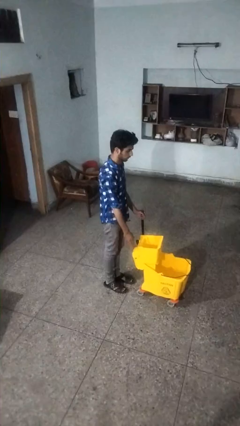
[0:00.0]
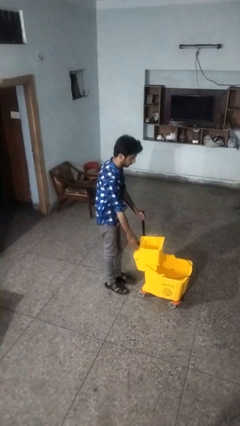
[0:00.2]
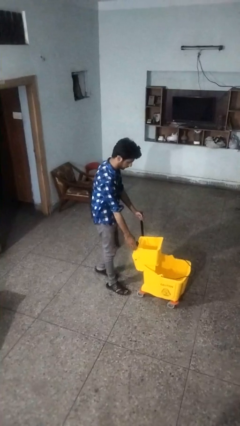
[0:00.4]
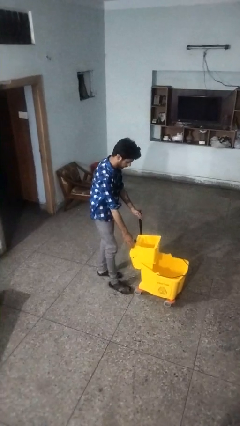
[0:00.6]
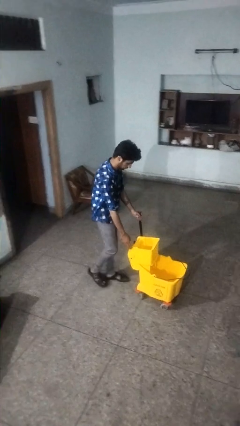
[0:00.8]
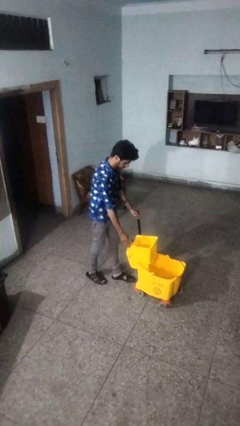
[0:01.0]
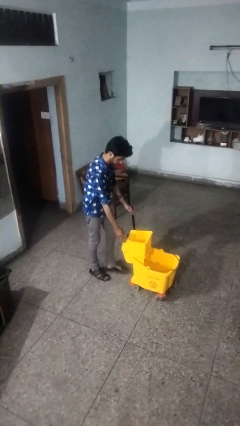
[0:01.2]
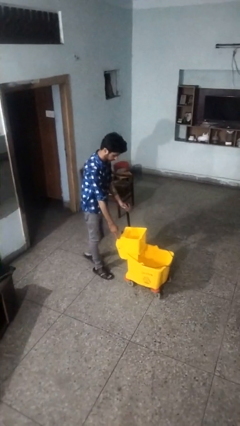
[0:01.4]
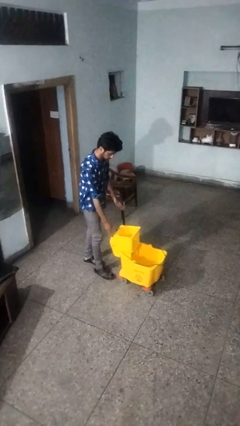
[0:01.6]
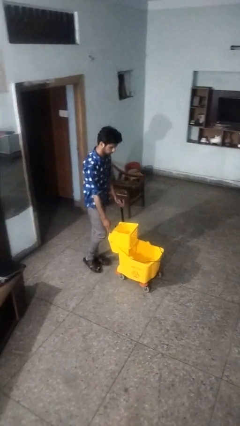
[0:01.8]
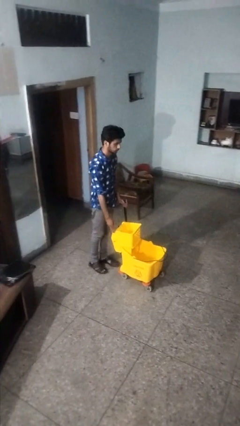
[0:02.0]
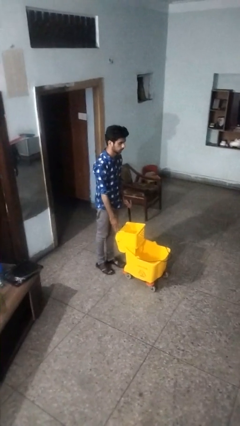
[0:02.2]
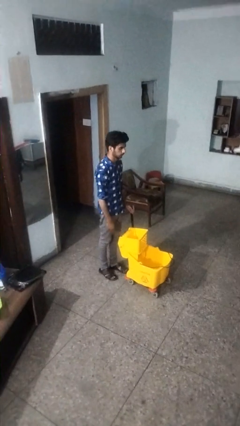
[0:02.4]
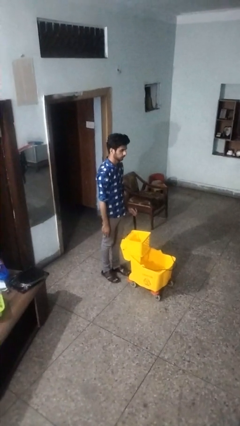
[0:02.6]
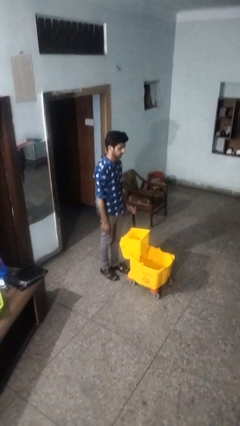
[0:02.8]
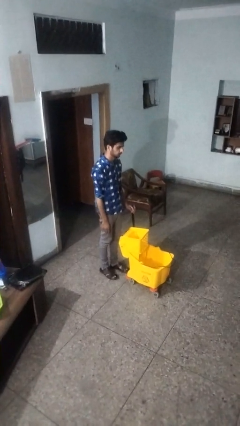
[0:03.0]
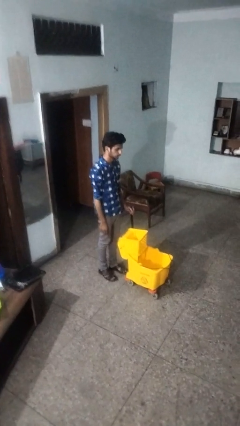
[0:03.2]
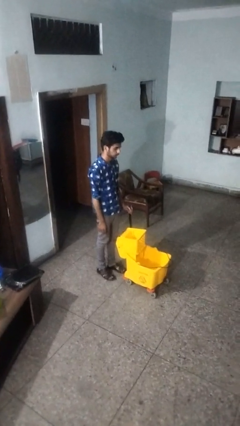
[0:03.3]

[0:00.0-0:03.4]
person pulls wheeled cart

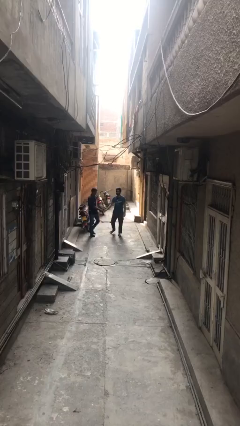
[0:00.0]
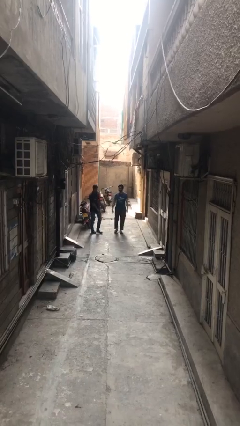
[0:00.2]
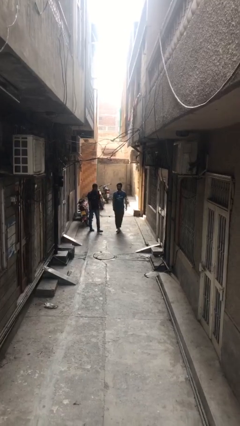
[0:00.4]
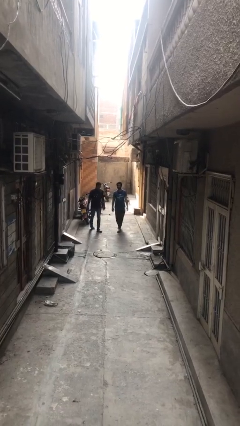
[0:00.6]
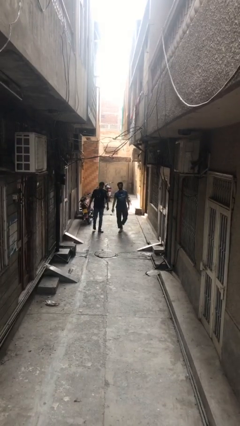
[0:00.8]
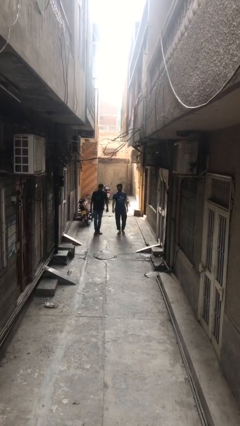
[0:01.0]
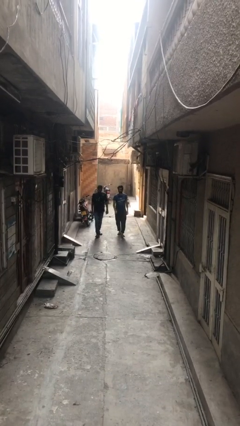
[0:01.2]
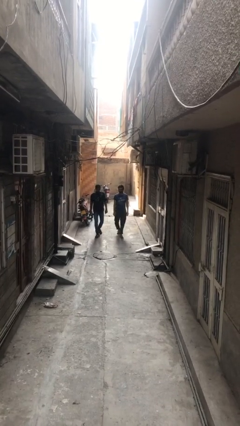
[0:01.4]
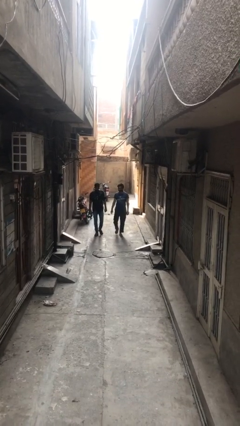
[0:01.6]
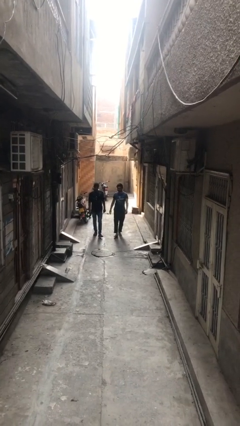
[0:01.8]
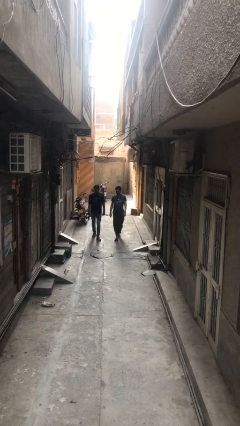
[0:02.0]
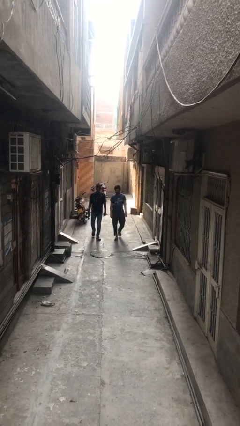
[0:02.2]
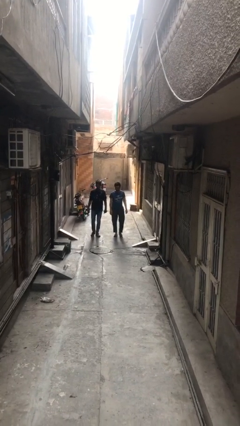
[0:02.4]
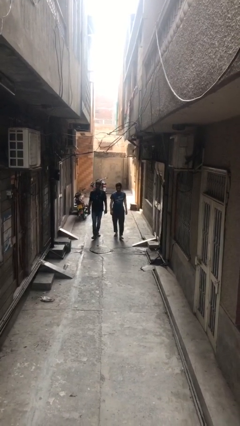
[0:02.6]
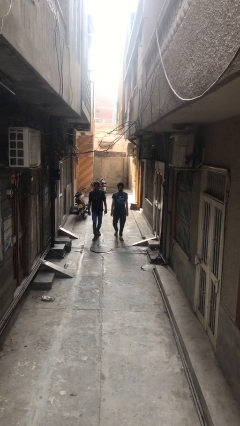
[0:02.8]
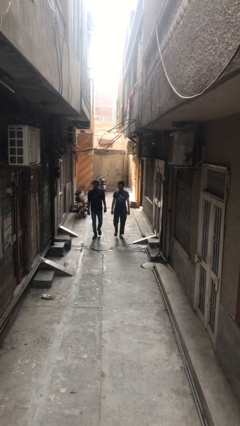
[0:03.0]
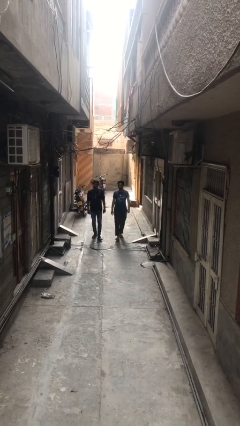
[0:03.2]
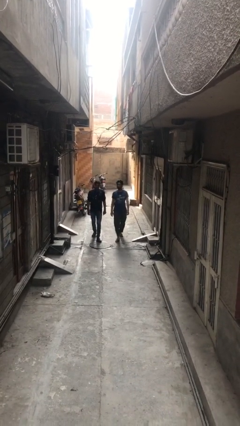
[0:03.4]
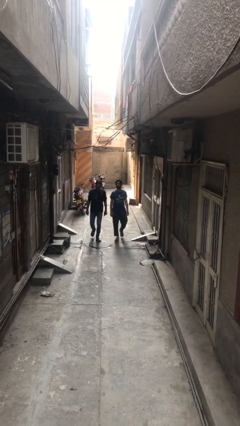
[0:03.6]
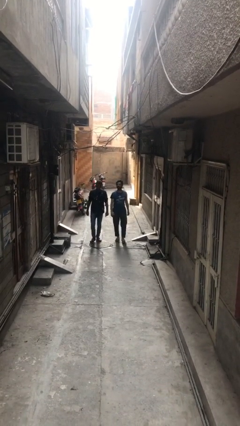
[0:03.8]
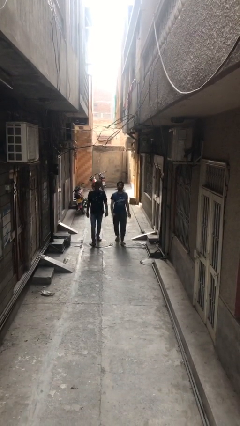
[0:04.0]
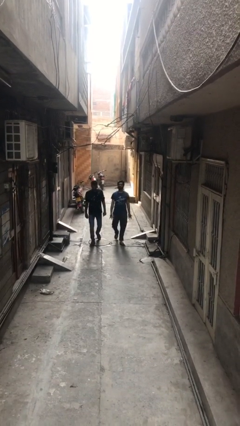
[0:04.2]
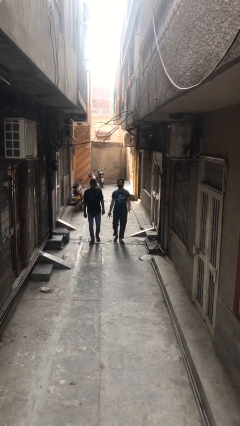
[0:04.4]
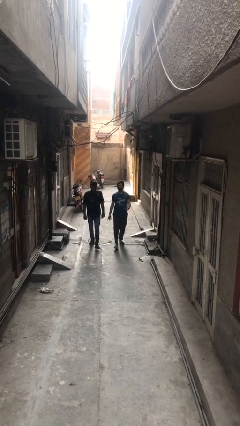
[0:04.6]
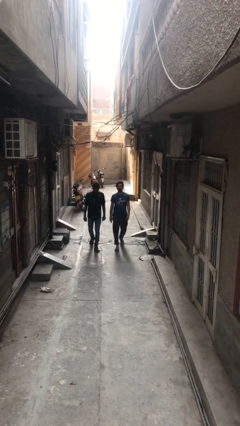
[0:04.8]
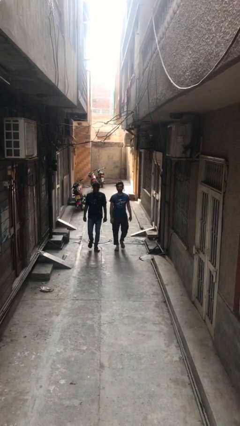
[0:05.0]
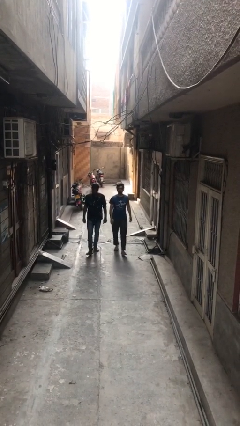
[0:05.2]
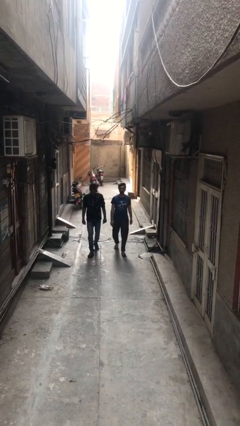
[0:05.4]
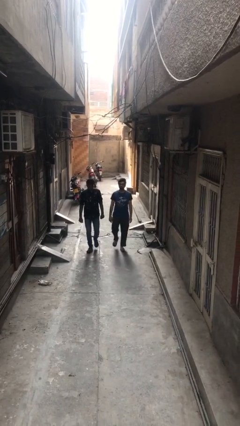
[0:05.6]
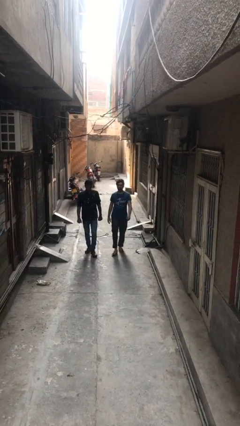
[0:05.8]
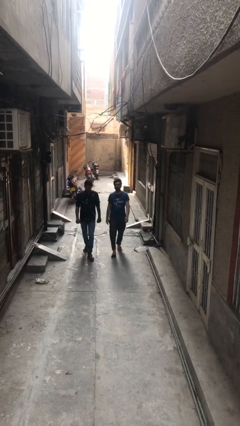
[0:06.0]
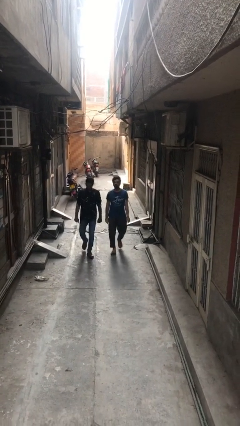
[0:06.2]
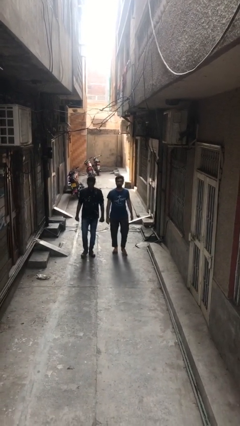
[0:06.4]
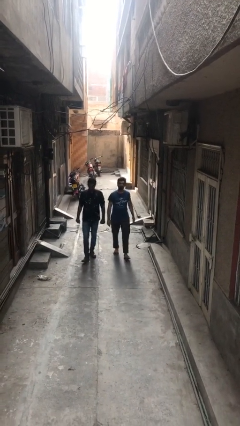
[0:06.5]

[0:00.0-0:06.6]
person talks to person

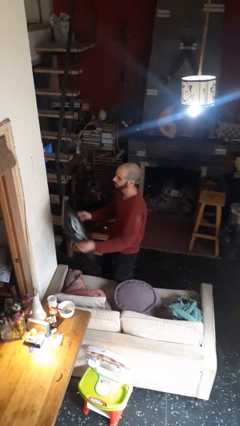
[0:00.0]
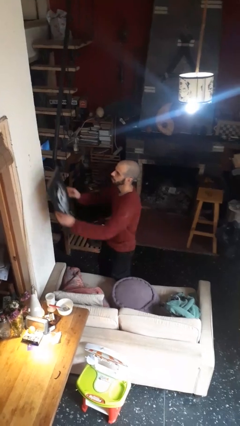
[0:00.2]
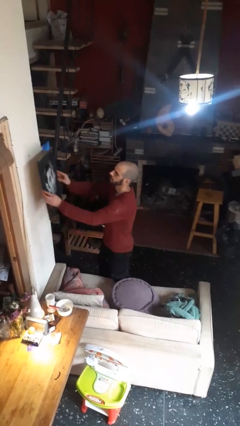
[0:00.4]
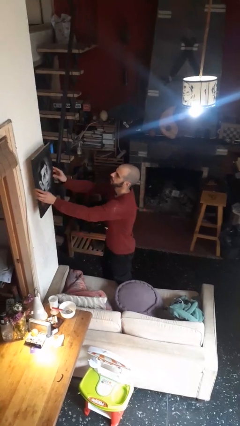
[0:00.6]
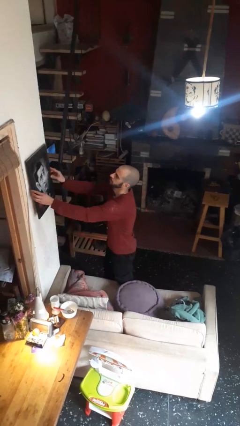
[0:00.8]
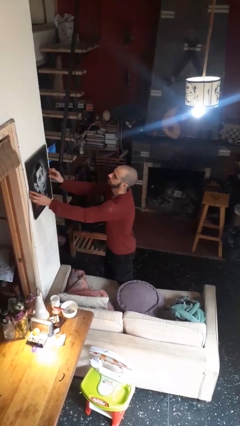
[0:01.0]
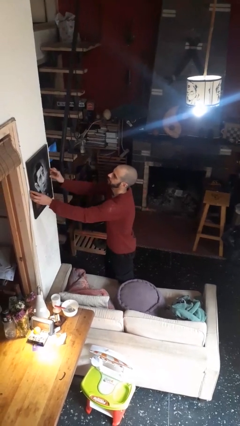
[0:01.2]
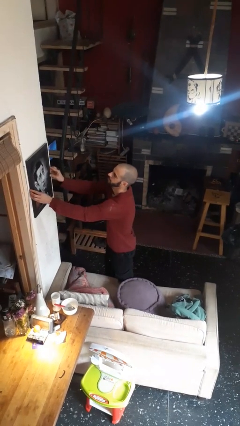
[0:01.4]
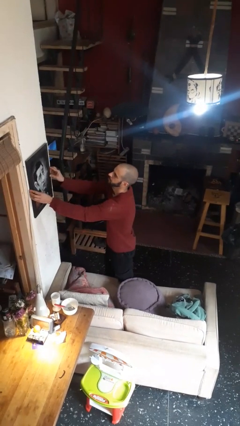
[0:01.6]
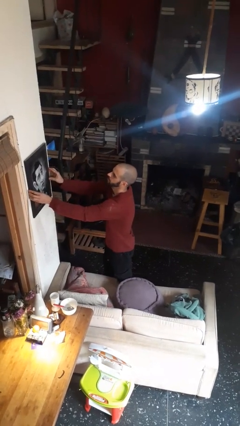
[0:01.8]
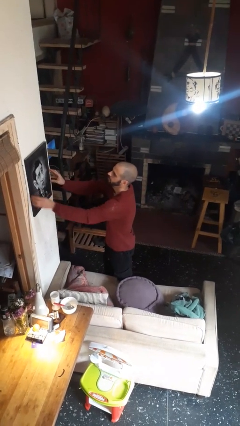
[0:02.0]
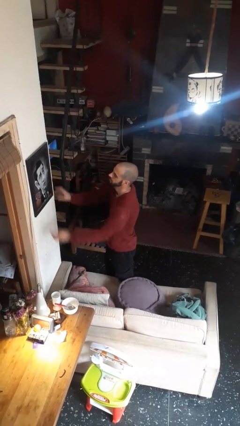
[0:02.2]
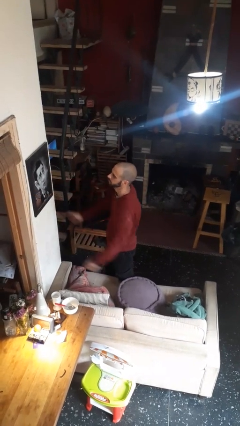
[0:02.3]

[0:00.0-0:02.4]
person puts up picture frame

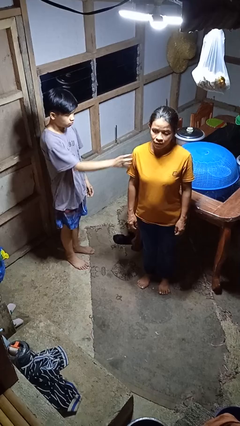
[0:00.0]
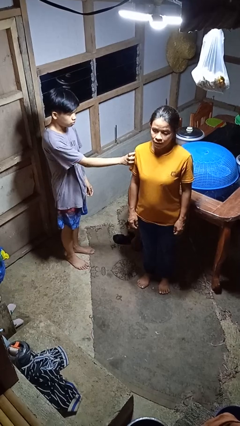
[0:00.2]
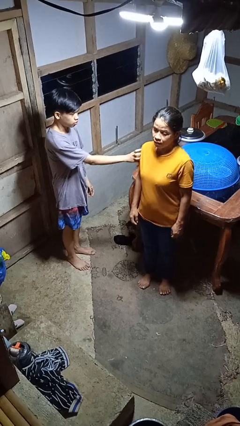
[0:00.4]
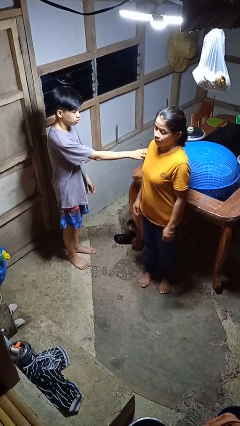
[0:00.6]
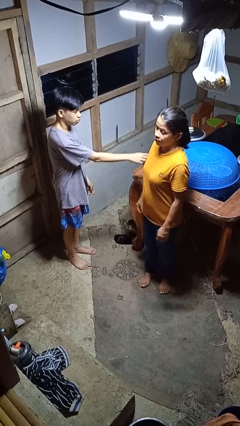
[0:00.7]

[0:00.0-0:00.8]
person grabs person by bicep

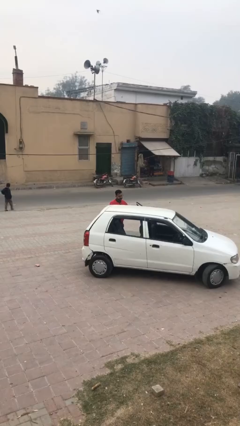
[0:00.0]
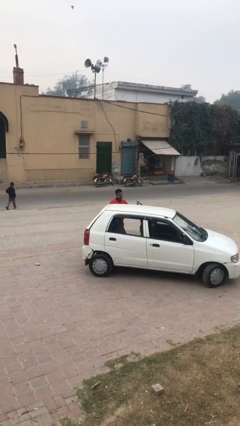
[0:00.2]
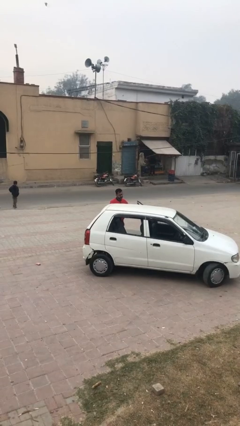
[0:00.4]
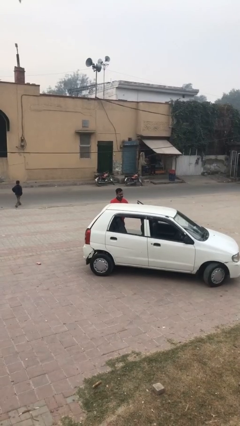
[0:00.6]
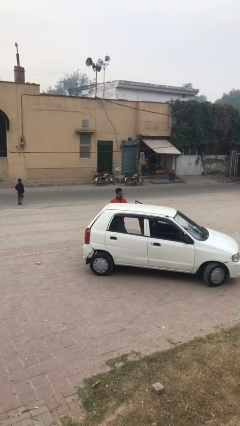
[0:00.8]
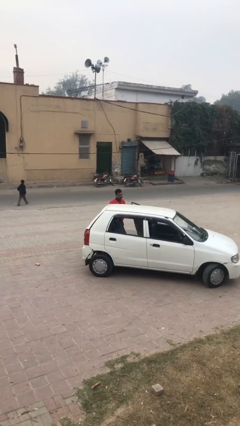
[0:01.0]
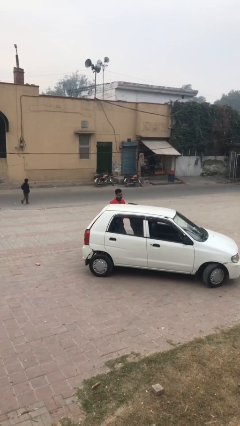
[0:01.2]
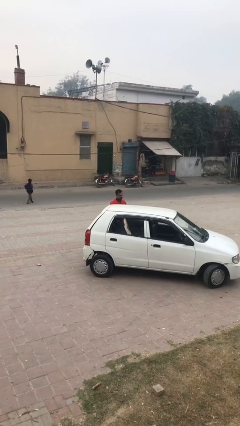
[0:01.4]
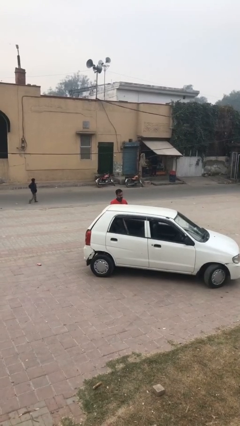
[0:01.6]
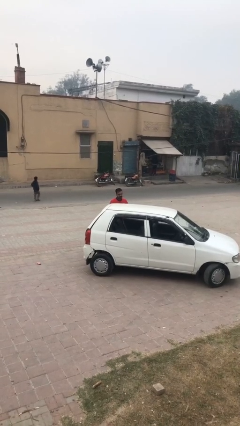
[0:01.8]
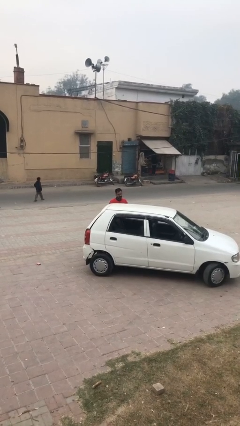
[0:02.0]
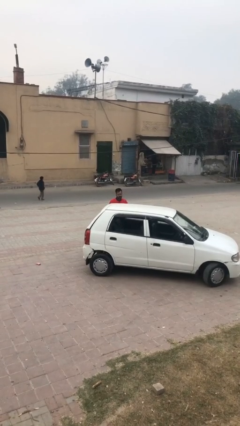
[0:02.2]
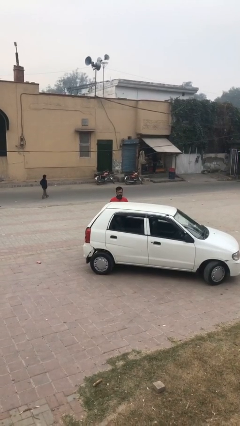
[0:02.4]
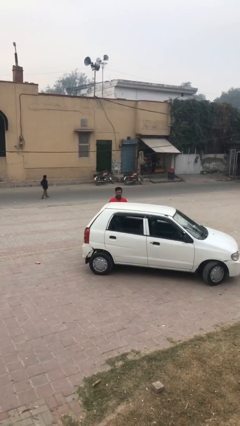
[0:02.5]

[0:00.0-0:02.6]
person closes car door

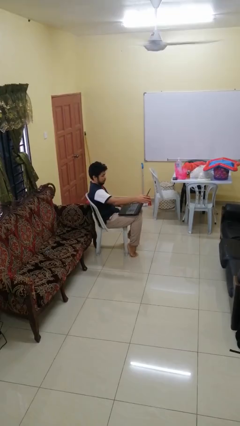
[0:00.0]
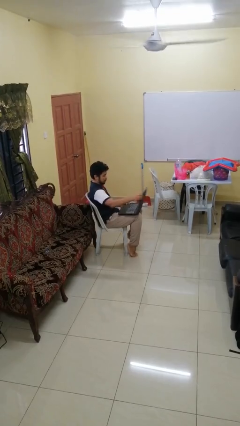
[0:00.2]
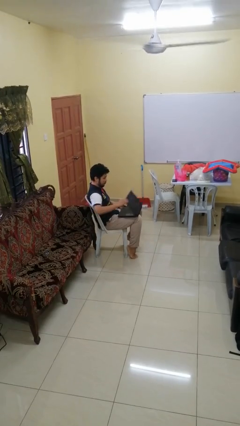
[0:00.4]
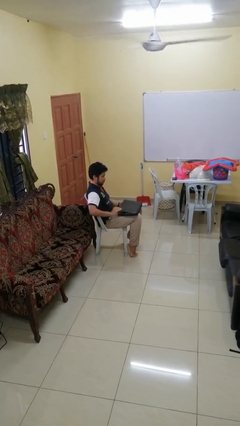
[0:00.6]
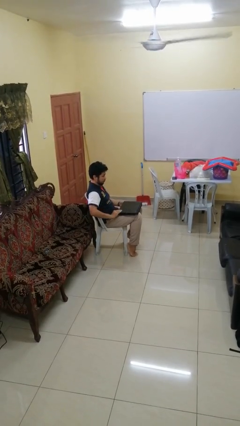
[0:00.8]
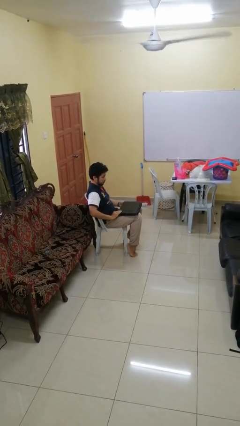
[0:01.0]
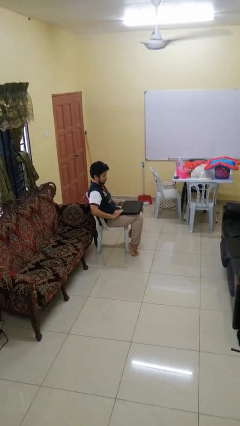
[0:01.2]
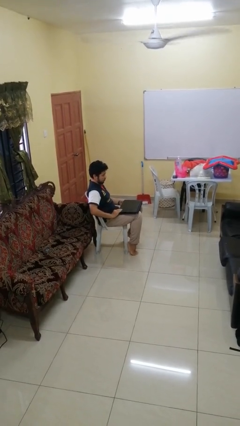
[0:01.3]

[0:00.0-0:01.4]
person closes laptop
